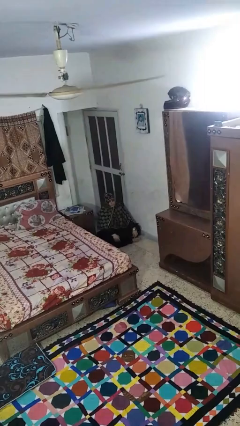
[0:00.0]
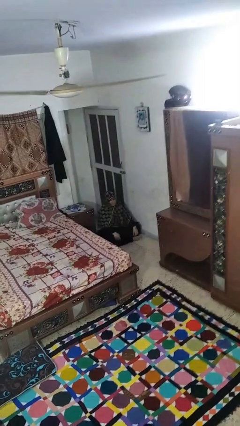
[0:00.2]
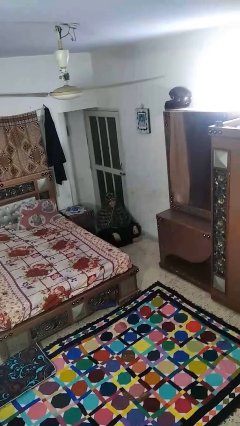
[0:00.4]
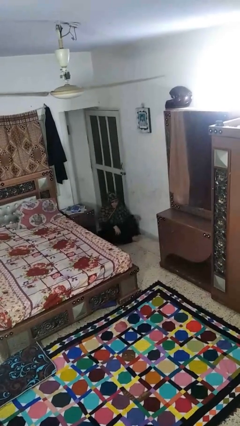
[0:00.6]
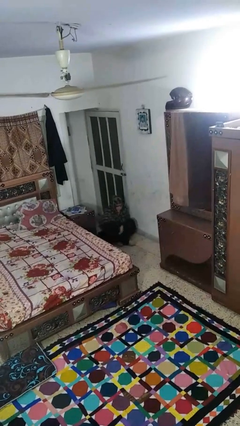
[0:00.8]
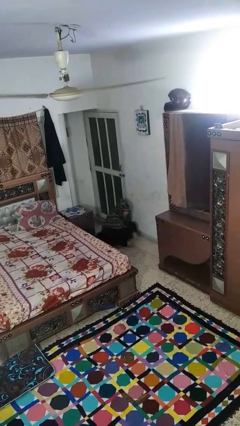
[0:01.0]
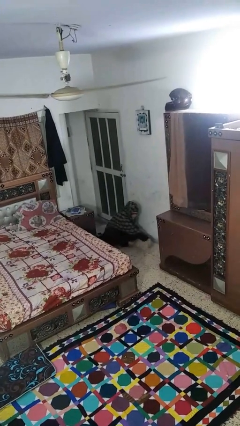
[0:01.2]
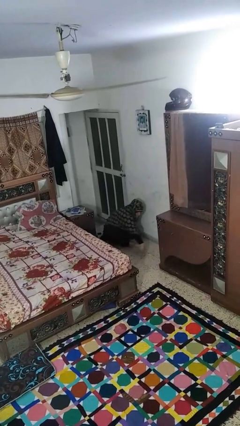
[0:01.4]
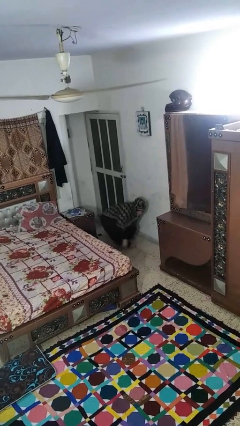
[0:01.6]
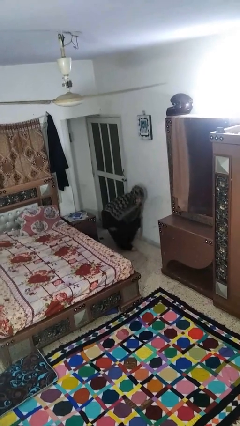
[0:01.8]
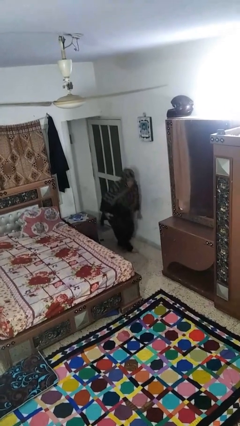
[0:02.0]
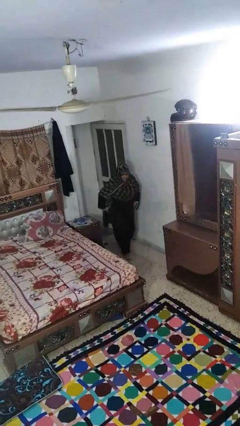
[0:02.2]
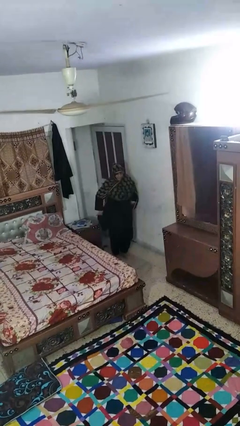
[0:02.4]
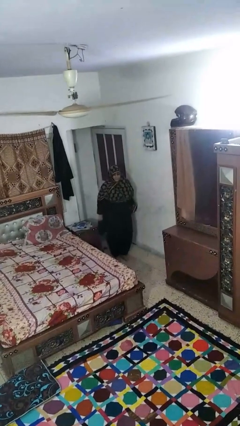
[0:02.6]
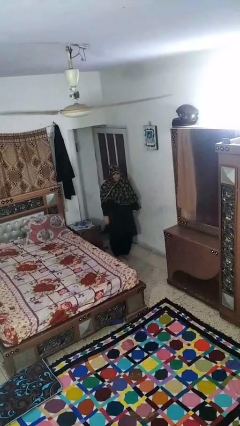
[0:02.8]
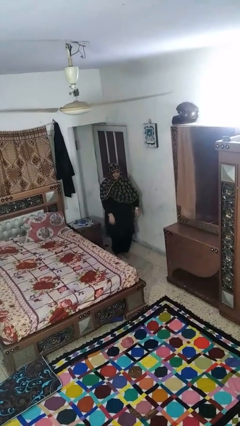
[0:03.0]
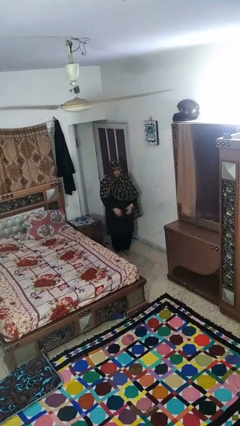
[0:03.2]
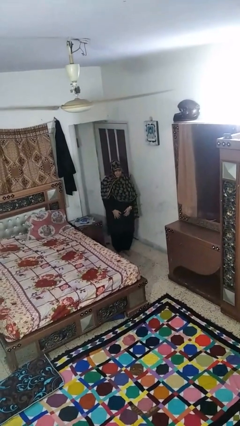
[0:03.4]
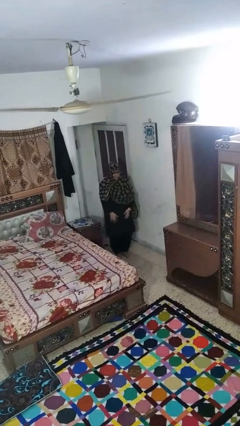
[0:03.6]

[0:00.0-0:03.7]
person stands up from floor

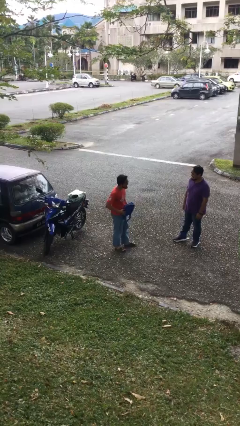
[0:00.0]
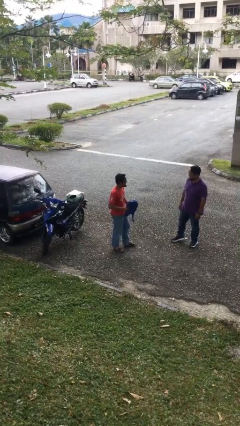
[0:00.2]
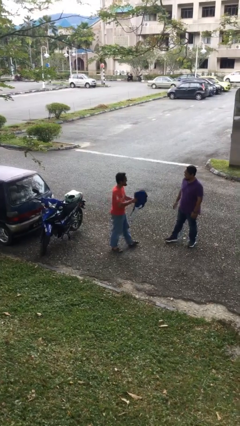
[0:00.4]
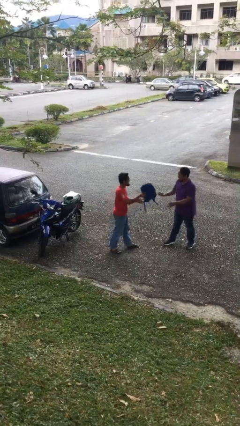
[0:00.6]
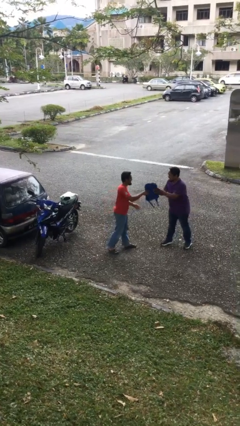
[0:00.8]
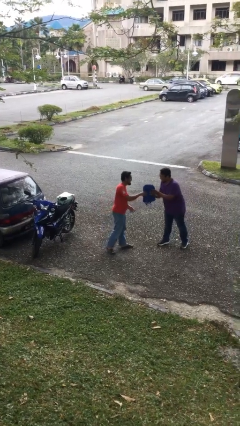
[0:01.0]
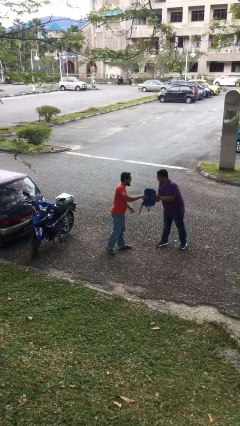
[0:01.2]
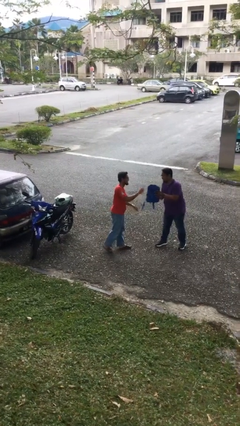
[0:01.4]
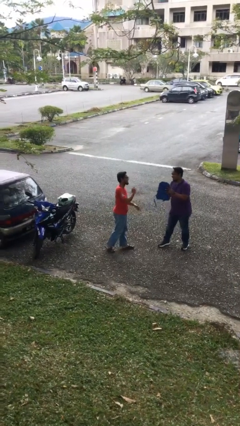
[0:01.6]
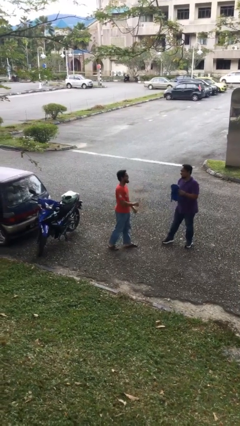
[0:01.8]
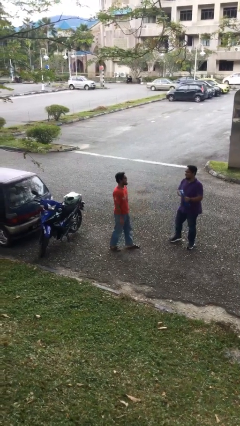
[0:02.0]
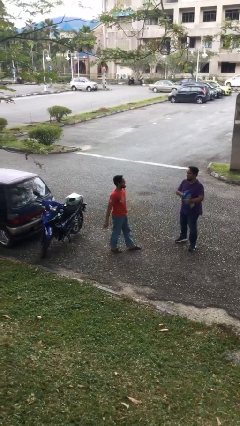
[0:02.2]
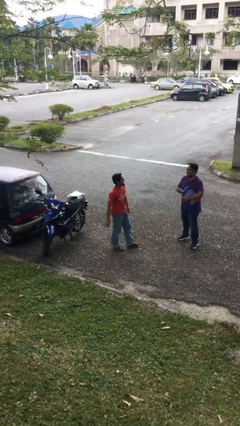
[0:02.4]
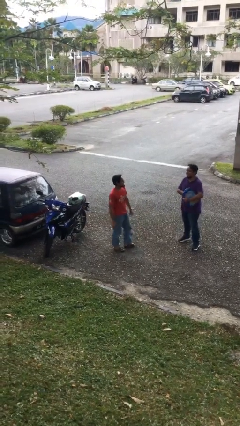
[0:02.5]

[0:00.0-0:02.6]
person transfers object to person

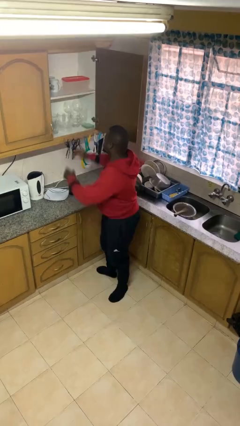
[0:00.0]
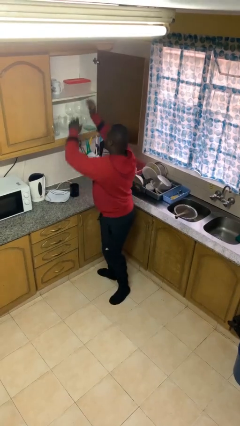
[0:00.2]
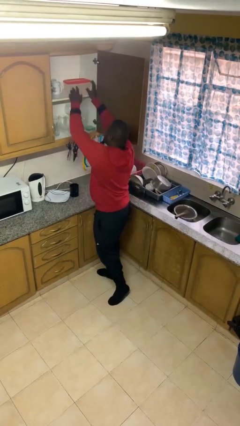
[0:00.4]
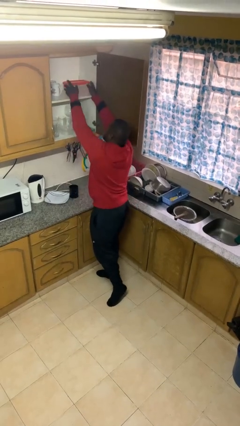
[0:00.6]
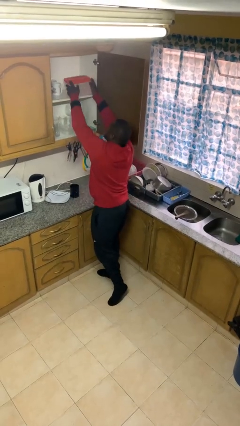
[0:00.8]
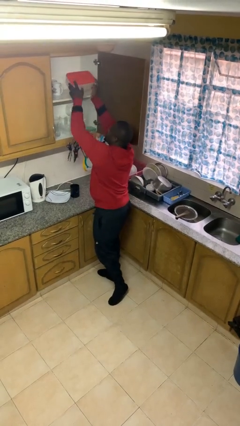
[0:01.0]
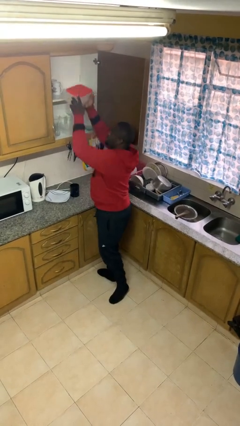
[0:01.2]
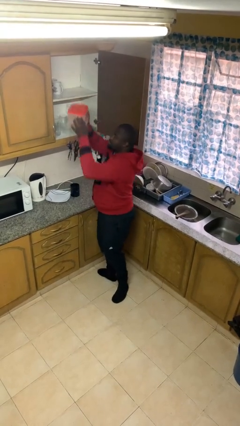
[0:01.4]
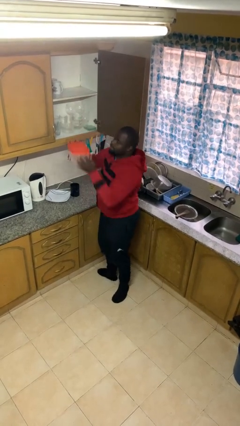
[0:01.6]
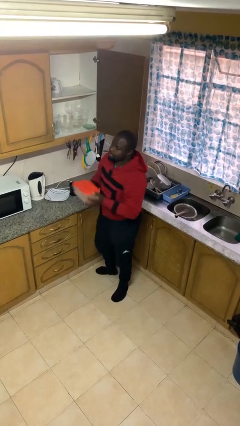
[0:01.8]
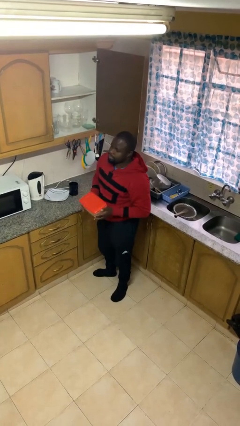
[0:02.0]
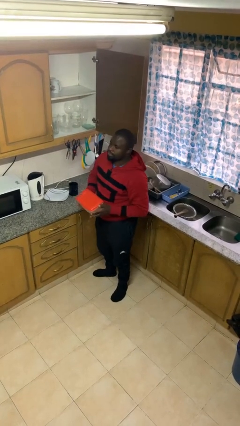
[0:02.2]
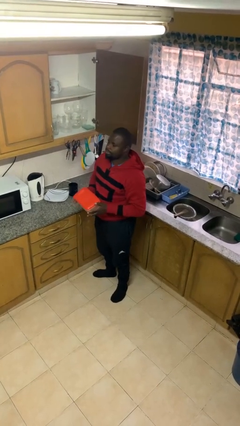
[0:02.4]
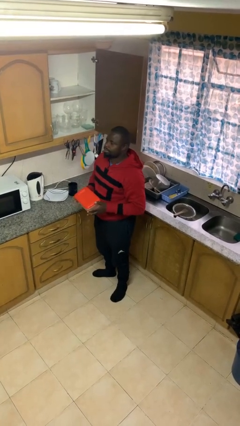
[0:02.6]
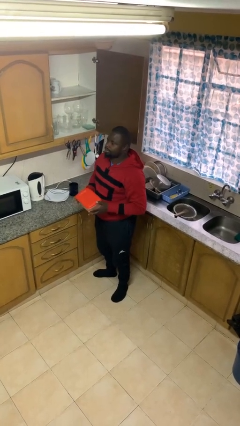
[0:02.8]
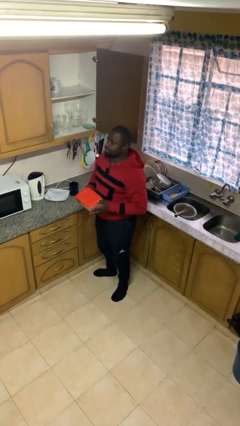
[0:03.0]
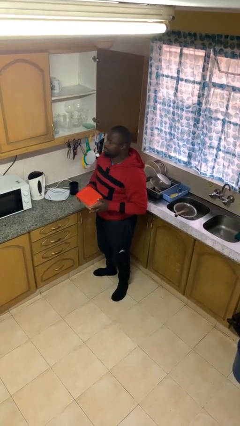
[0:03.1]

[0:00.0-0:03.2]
person picks up object from cabinet

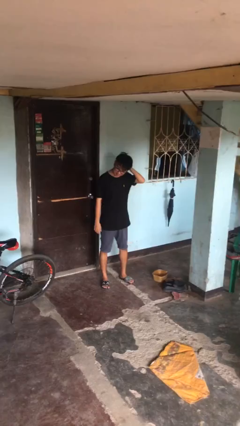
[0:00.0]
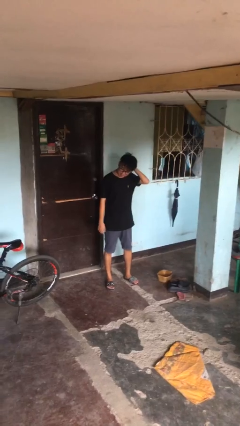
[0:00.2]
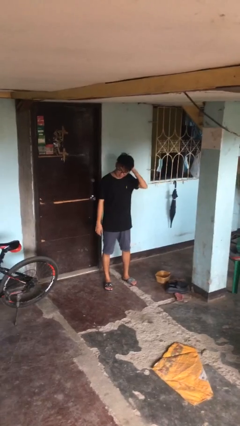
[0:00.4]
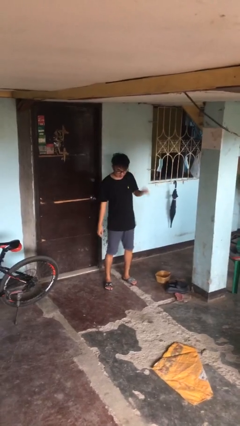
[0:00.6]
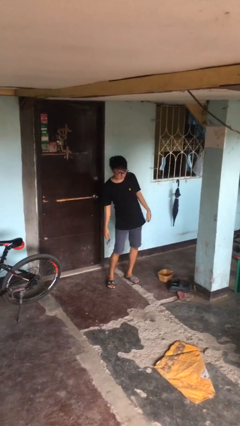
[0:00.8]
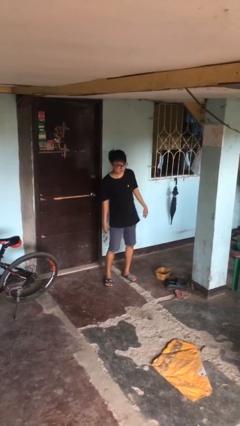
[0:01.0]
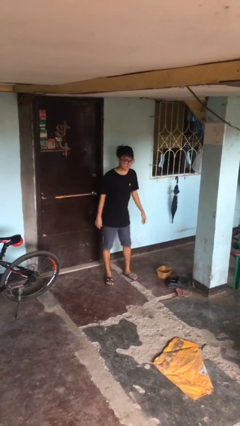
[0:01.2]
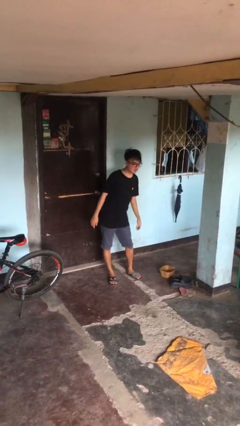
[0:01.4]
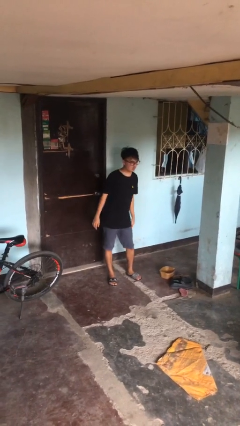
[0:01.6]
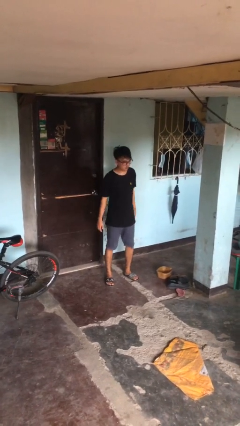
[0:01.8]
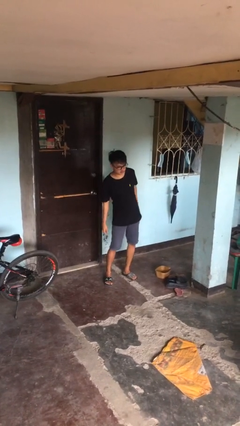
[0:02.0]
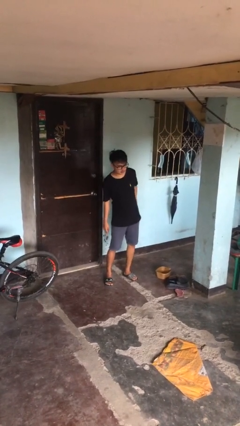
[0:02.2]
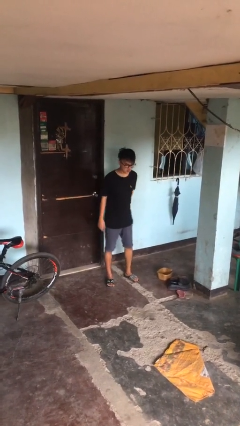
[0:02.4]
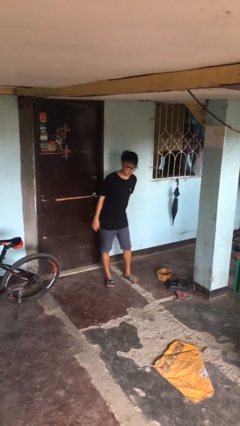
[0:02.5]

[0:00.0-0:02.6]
person wiggles hips

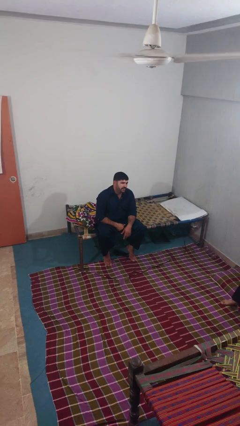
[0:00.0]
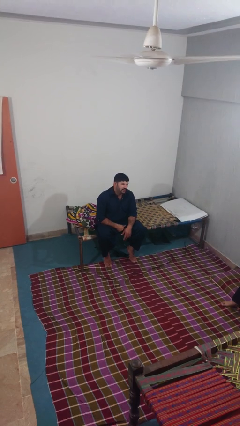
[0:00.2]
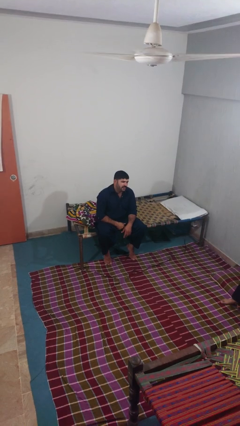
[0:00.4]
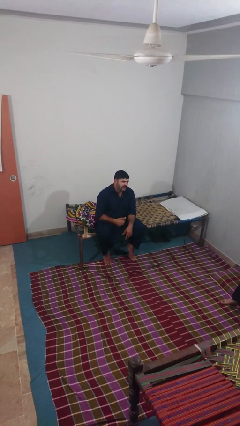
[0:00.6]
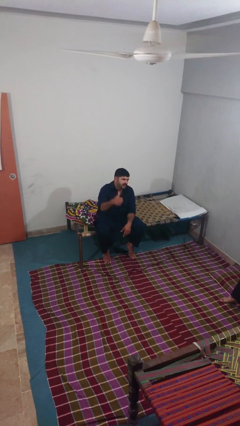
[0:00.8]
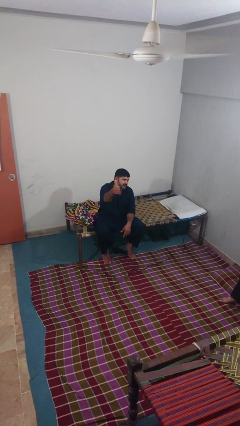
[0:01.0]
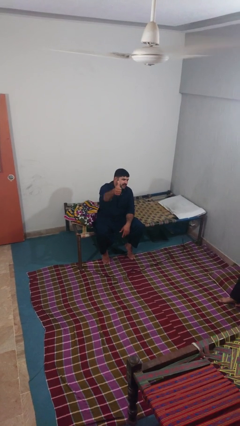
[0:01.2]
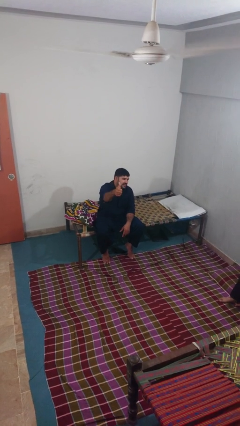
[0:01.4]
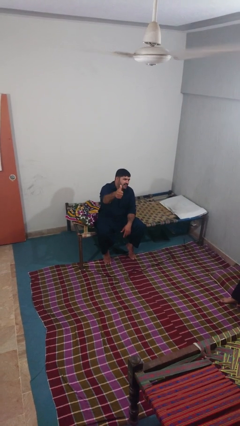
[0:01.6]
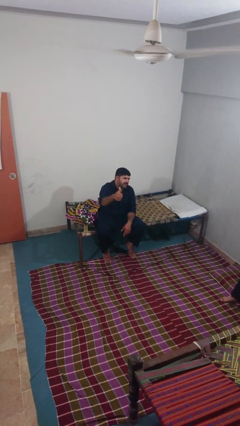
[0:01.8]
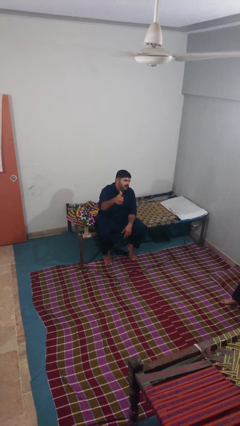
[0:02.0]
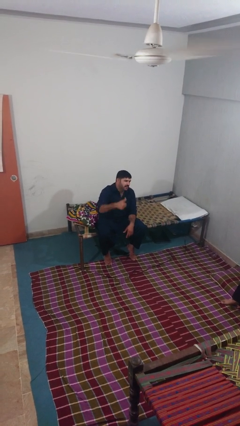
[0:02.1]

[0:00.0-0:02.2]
person gestures thumbs up

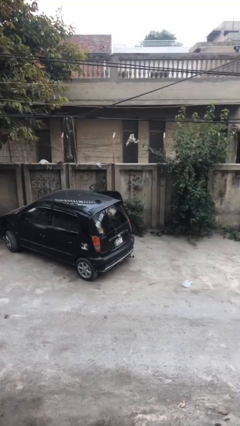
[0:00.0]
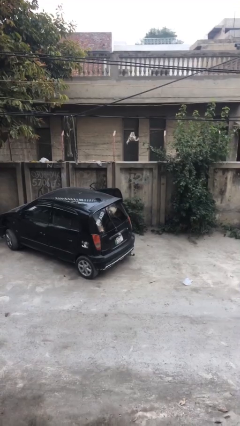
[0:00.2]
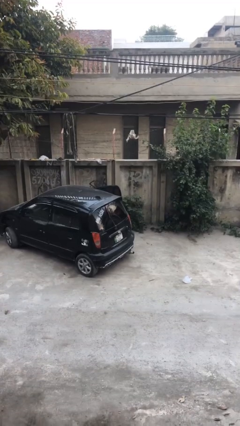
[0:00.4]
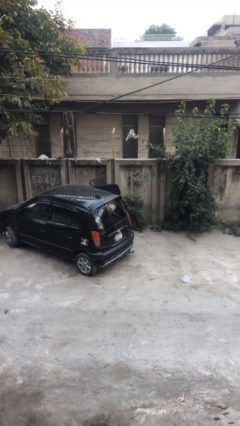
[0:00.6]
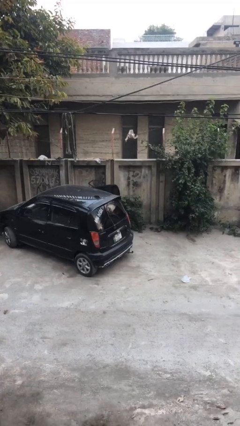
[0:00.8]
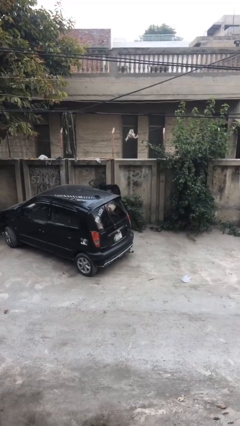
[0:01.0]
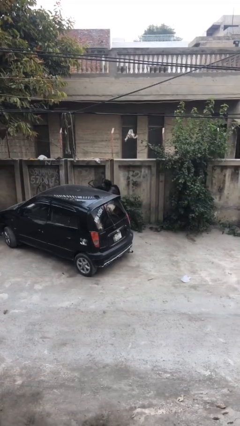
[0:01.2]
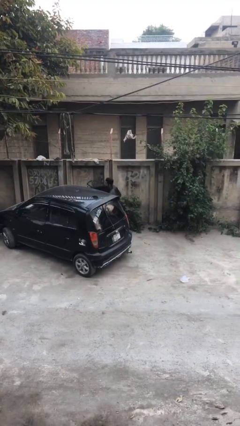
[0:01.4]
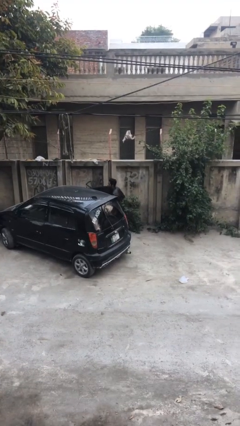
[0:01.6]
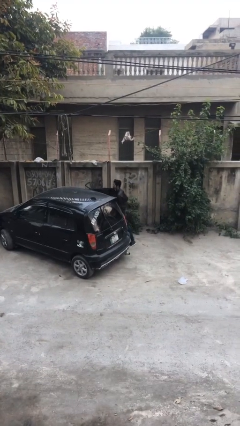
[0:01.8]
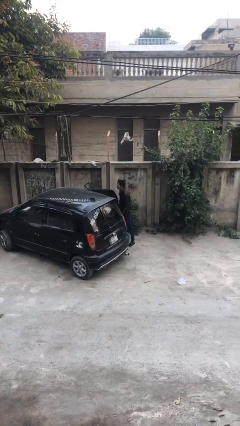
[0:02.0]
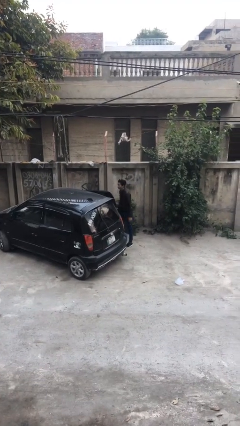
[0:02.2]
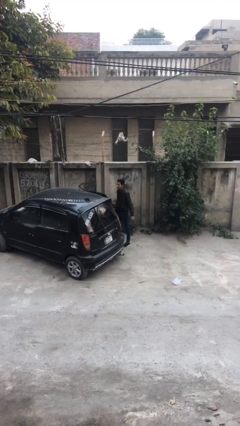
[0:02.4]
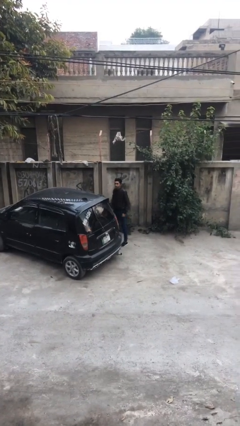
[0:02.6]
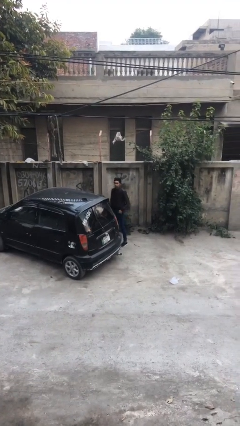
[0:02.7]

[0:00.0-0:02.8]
person exits car

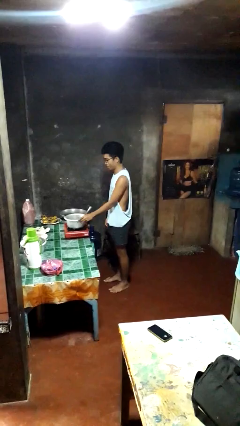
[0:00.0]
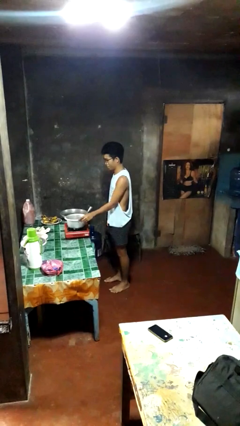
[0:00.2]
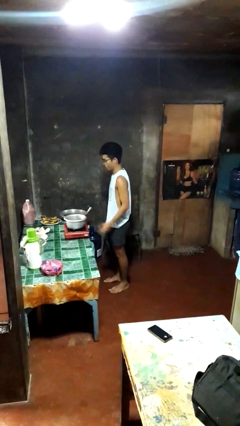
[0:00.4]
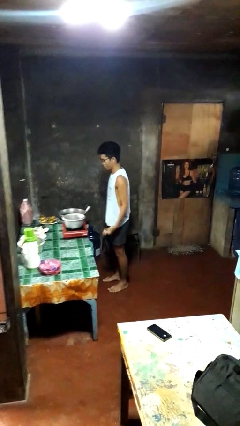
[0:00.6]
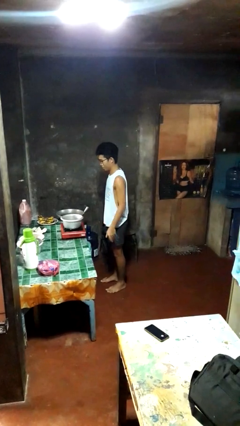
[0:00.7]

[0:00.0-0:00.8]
person burns hand
